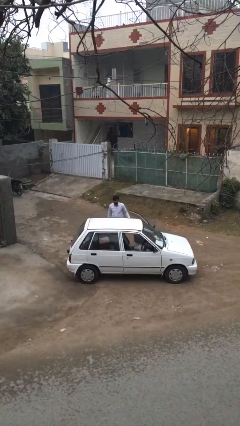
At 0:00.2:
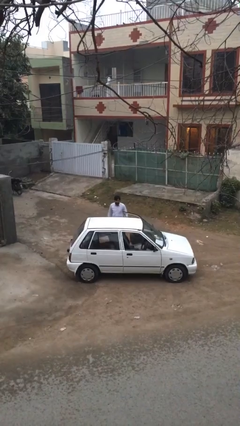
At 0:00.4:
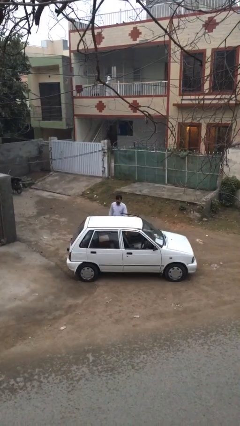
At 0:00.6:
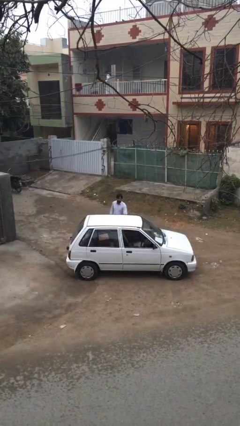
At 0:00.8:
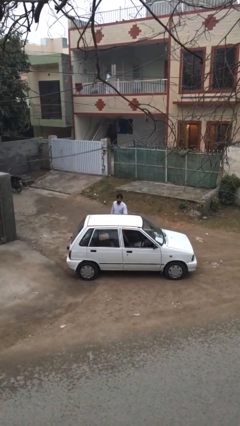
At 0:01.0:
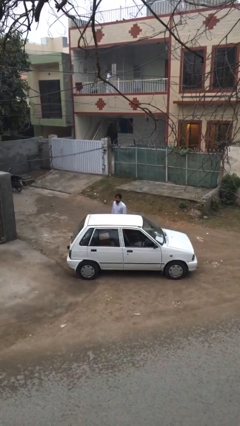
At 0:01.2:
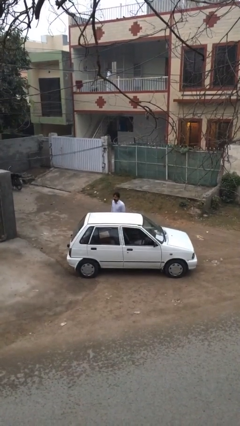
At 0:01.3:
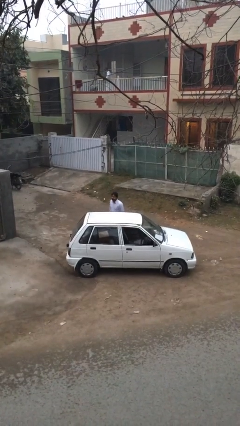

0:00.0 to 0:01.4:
person closes car door

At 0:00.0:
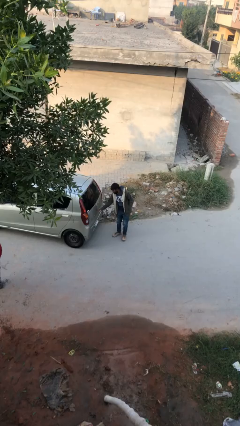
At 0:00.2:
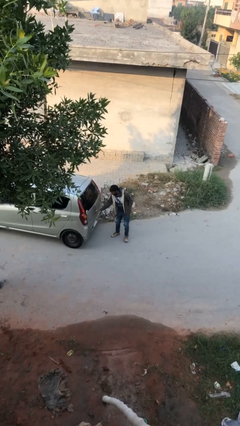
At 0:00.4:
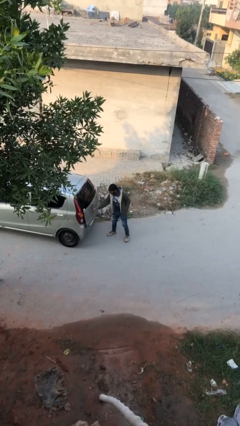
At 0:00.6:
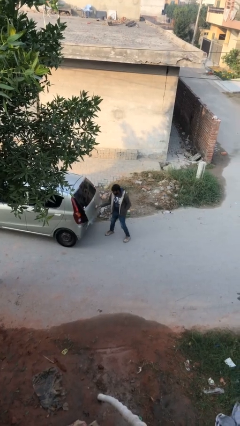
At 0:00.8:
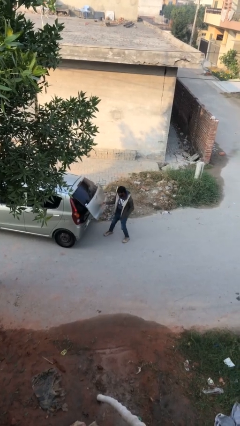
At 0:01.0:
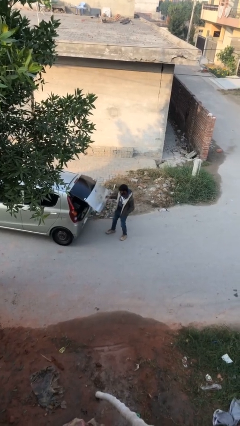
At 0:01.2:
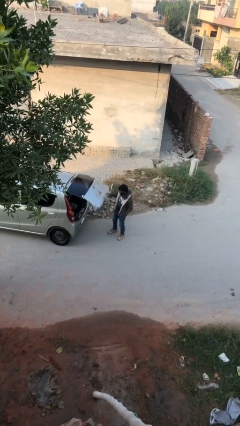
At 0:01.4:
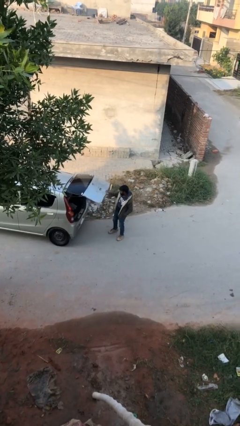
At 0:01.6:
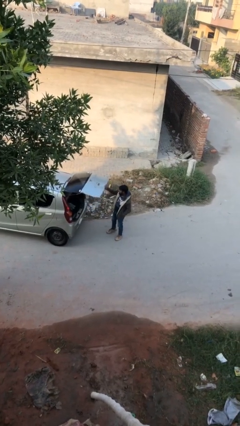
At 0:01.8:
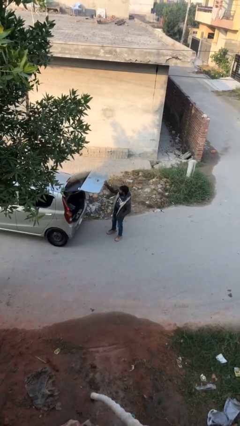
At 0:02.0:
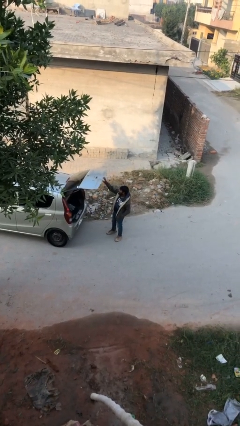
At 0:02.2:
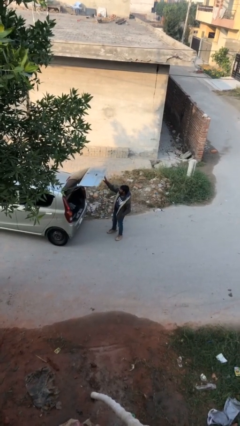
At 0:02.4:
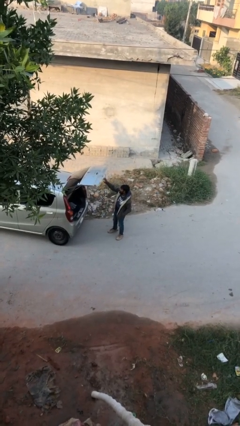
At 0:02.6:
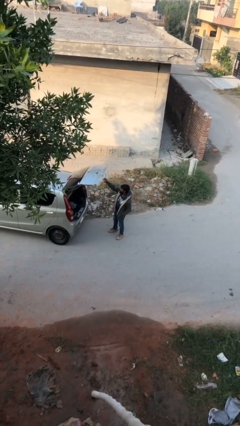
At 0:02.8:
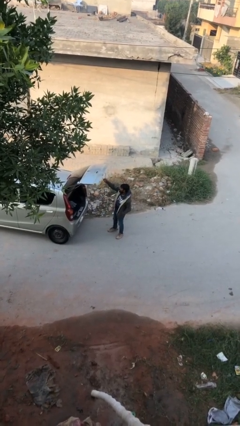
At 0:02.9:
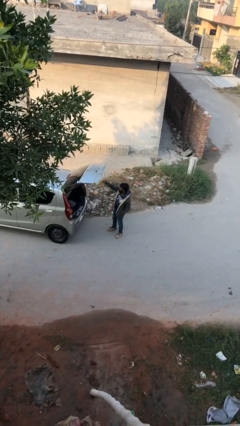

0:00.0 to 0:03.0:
person opens car trunk

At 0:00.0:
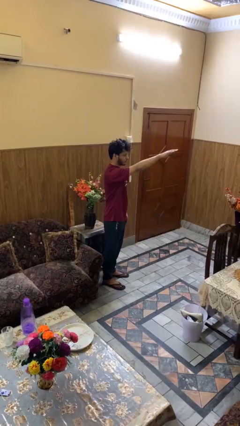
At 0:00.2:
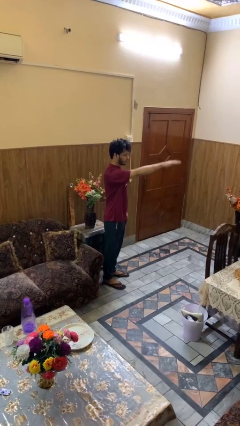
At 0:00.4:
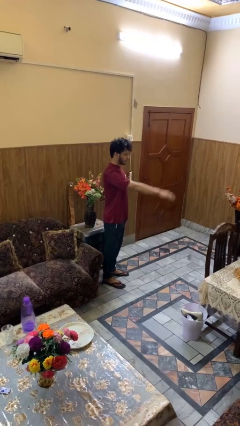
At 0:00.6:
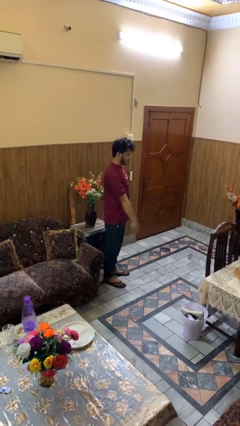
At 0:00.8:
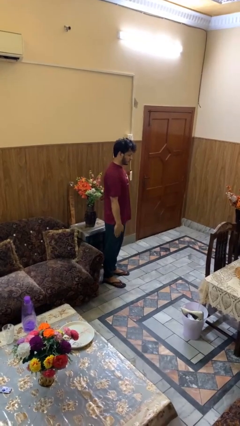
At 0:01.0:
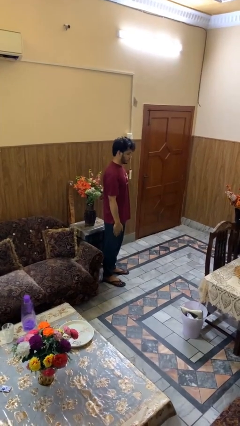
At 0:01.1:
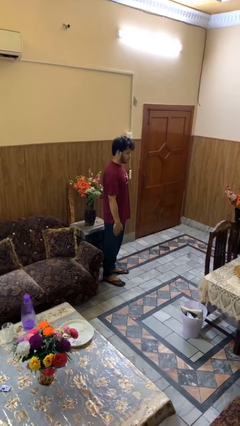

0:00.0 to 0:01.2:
person gestures swipe down

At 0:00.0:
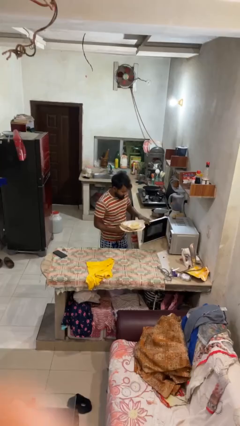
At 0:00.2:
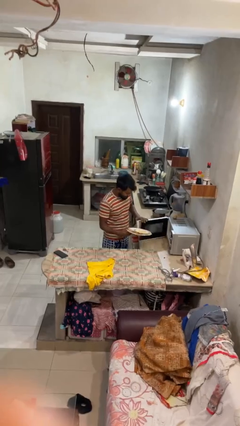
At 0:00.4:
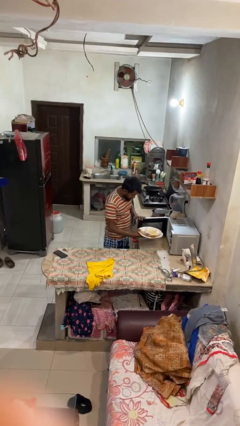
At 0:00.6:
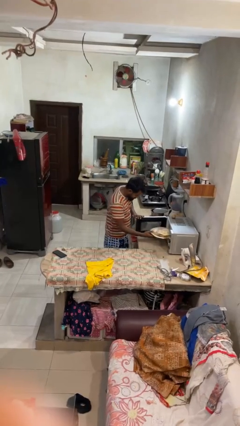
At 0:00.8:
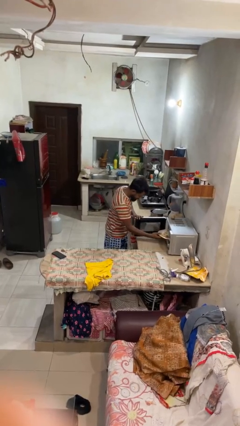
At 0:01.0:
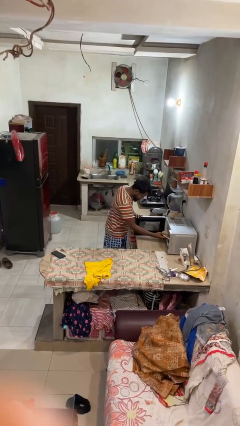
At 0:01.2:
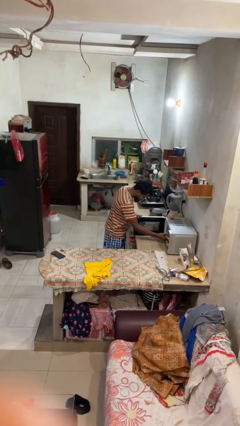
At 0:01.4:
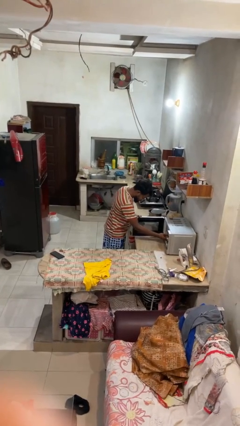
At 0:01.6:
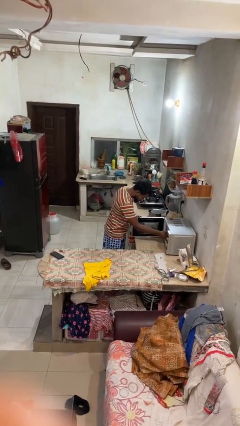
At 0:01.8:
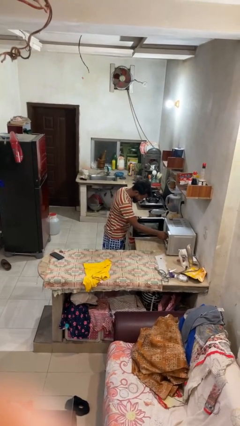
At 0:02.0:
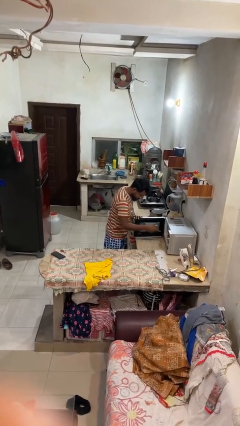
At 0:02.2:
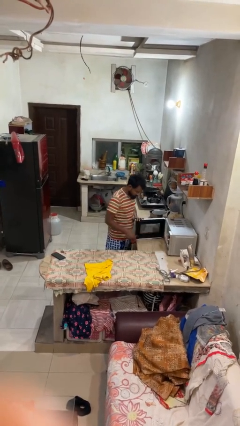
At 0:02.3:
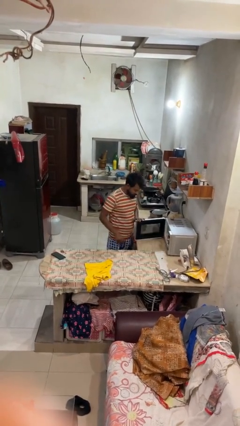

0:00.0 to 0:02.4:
person puts object into microwave

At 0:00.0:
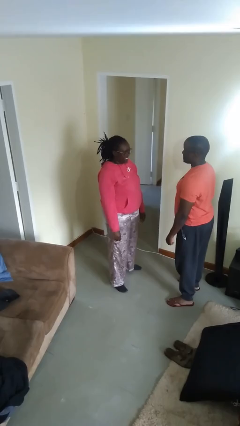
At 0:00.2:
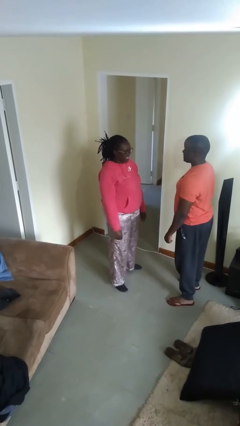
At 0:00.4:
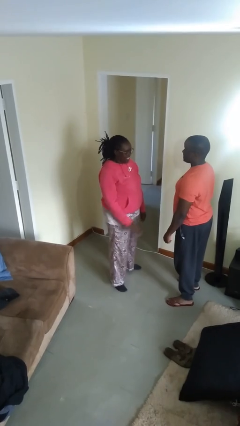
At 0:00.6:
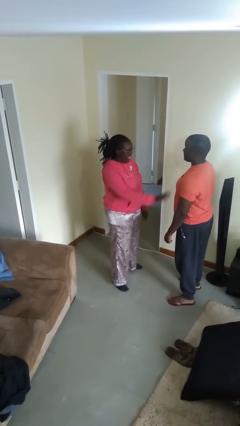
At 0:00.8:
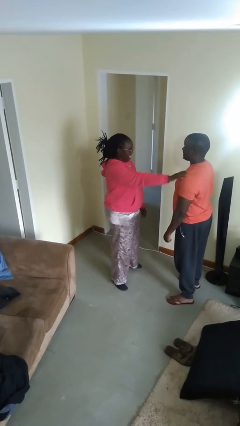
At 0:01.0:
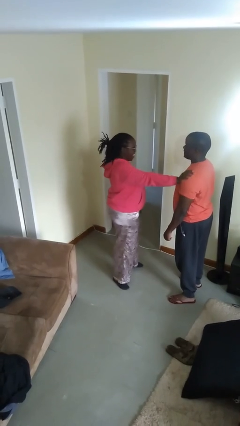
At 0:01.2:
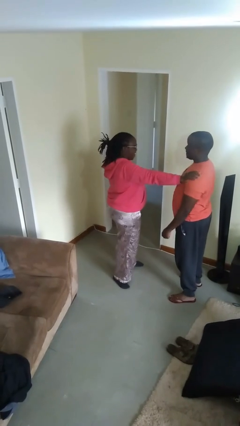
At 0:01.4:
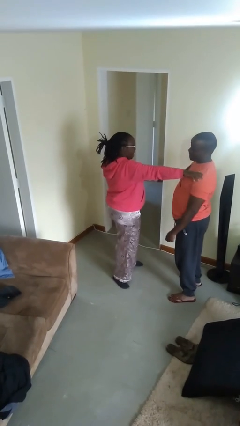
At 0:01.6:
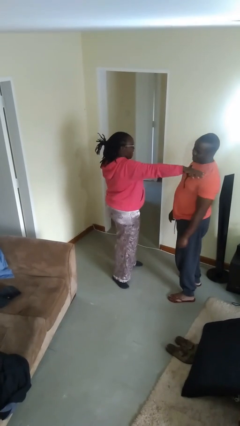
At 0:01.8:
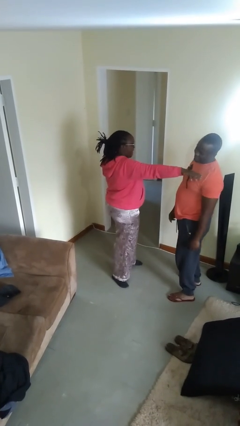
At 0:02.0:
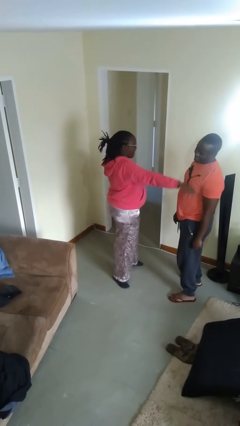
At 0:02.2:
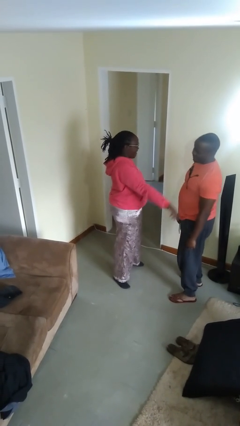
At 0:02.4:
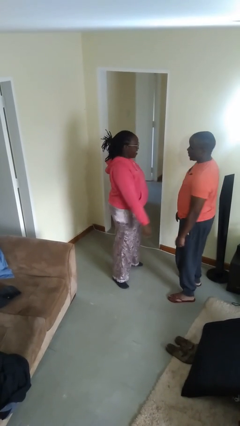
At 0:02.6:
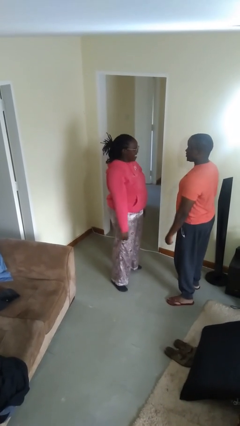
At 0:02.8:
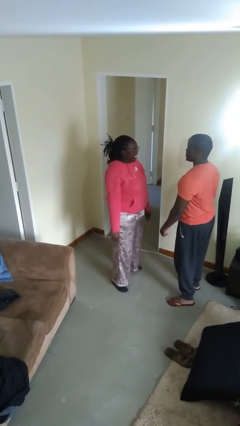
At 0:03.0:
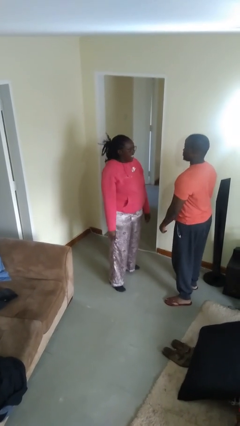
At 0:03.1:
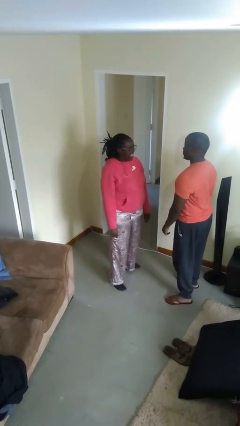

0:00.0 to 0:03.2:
person shoves person

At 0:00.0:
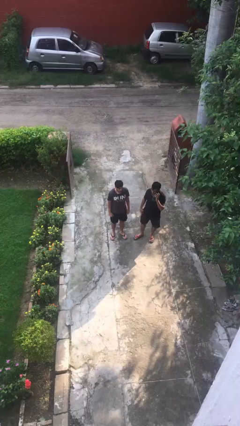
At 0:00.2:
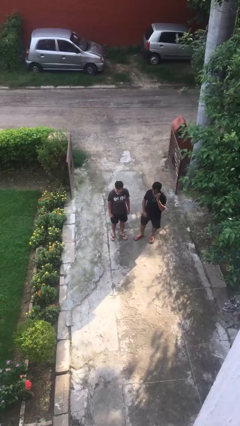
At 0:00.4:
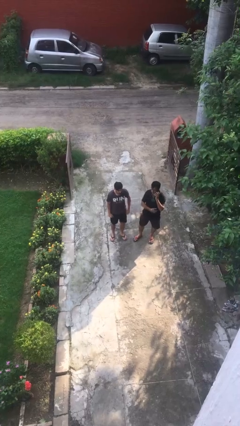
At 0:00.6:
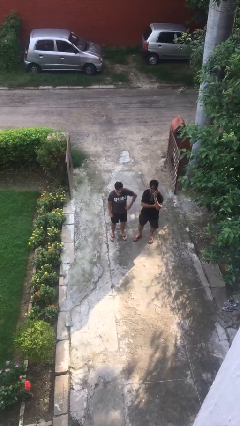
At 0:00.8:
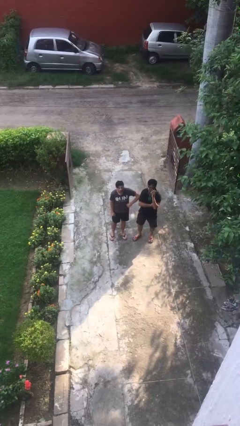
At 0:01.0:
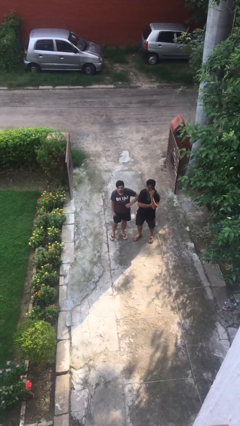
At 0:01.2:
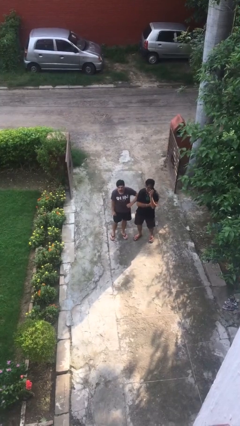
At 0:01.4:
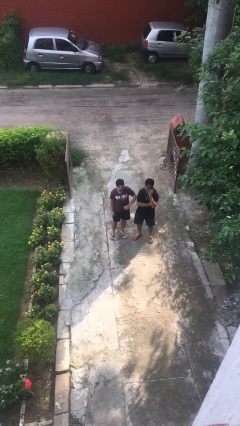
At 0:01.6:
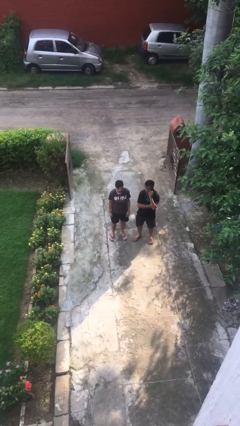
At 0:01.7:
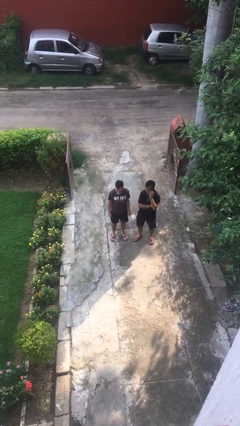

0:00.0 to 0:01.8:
person nudges person with elbow

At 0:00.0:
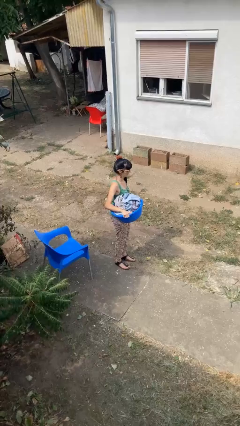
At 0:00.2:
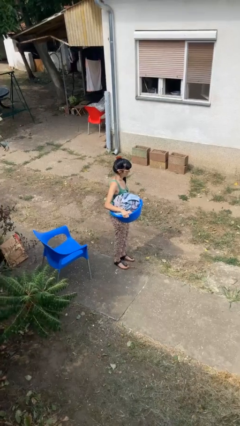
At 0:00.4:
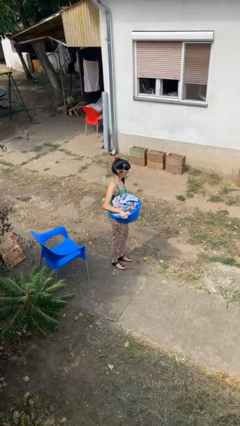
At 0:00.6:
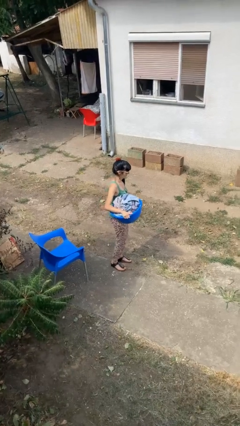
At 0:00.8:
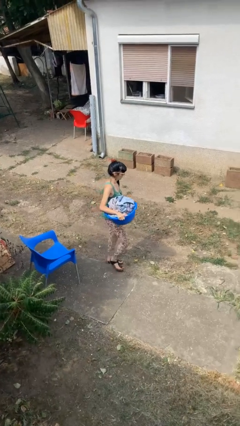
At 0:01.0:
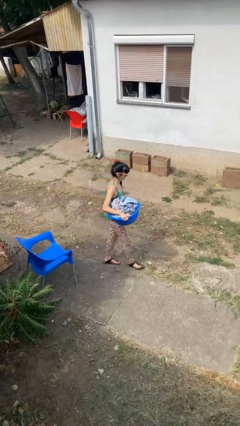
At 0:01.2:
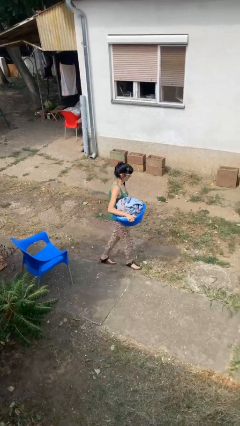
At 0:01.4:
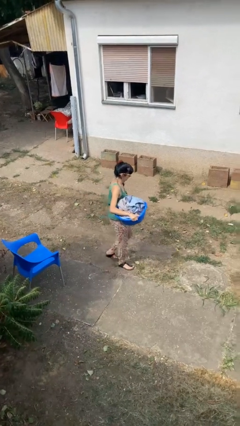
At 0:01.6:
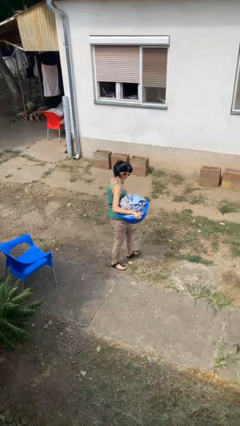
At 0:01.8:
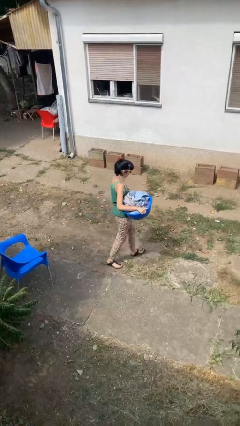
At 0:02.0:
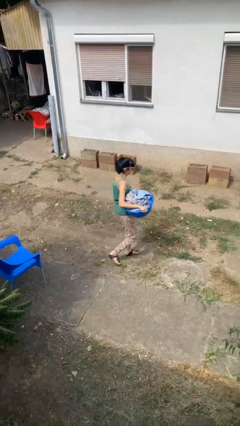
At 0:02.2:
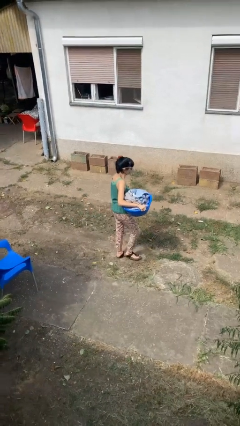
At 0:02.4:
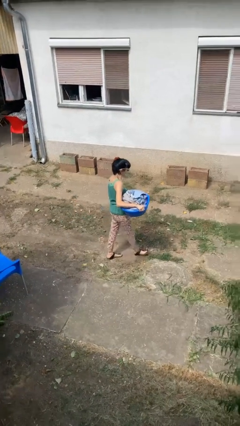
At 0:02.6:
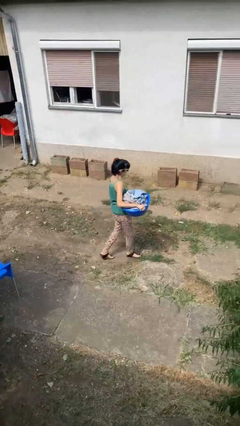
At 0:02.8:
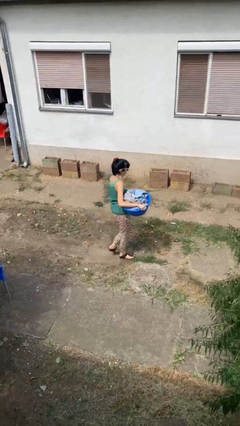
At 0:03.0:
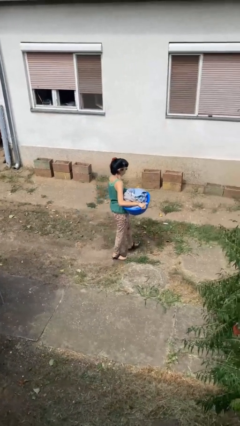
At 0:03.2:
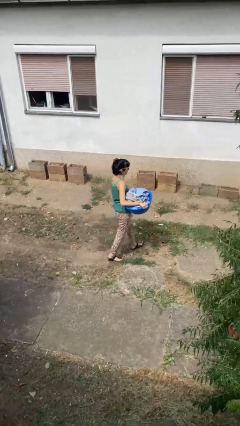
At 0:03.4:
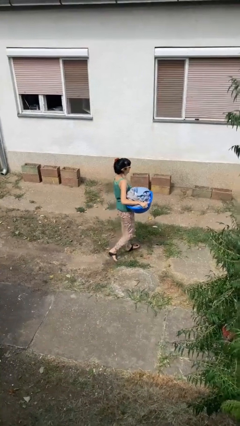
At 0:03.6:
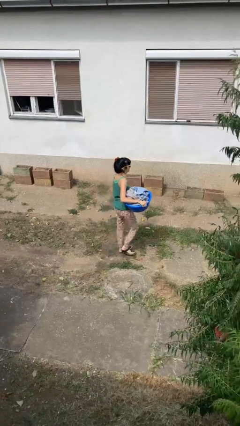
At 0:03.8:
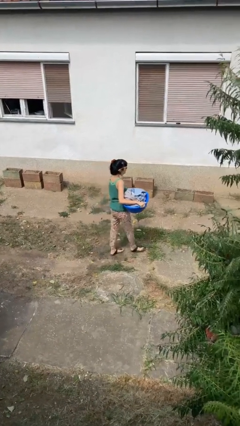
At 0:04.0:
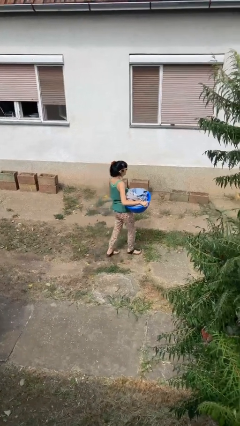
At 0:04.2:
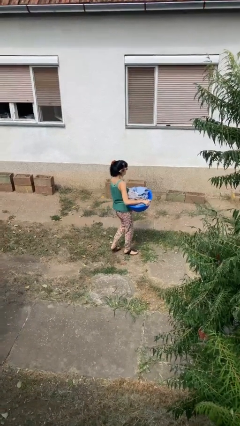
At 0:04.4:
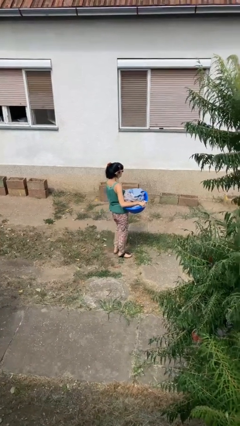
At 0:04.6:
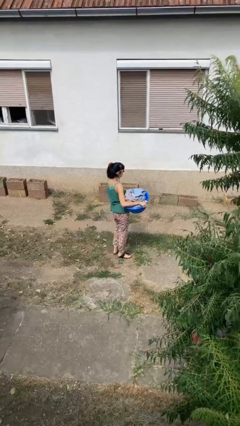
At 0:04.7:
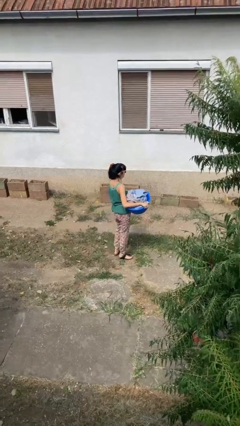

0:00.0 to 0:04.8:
person carries laundry basket
